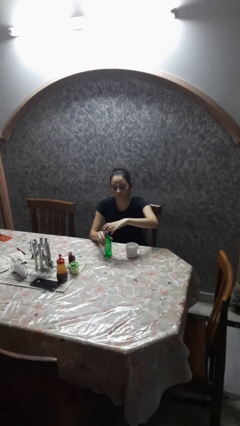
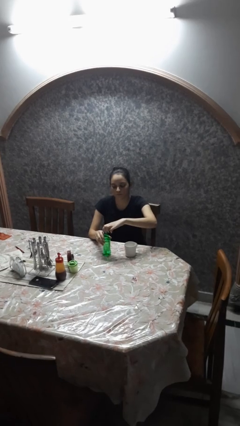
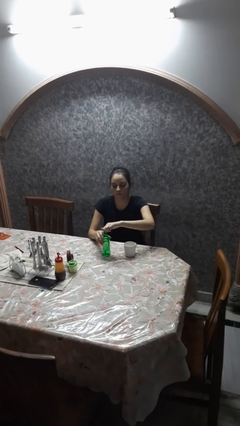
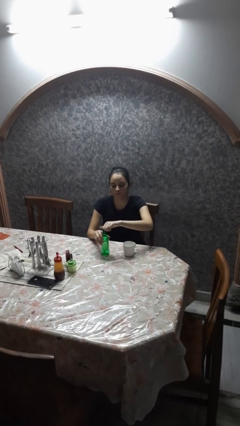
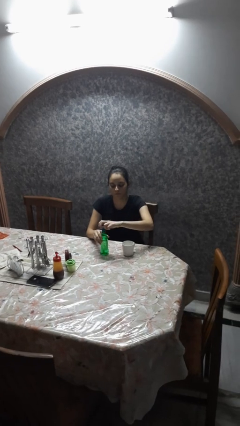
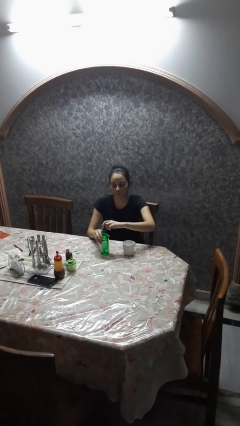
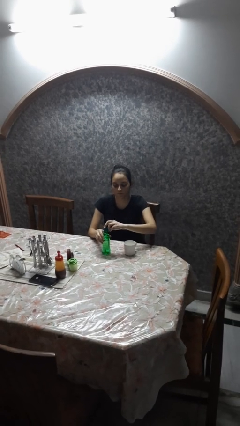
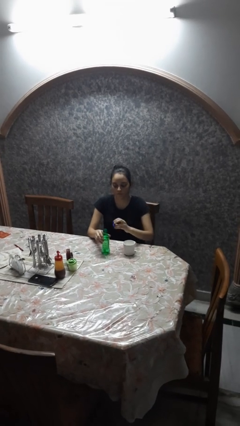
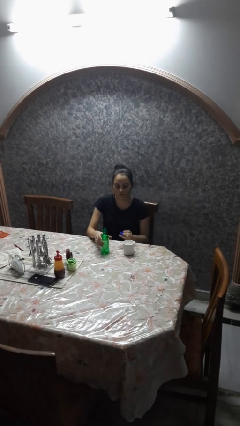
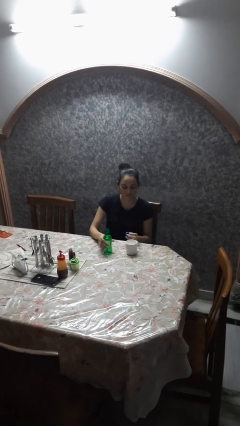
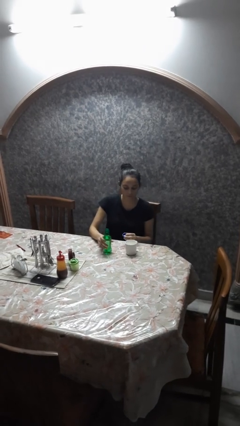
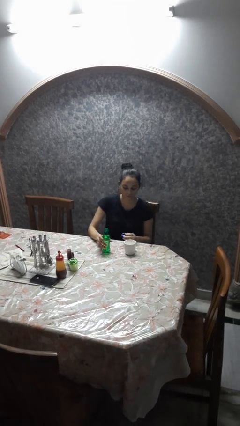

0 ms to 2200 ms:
person unscrews lid from bottle

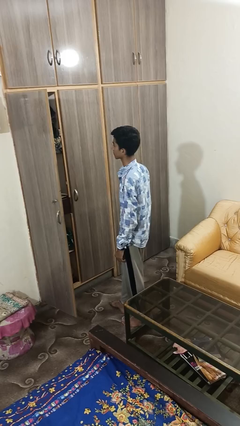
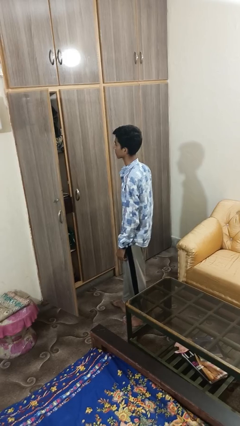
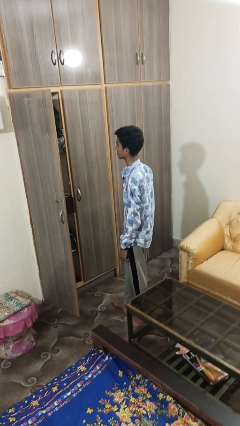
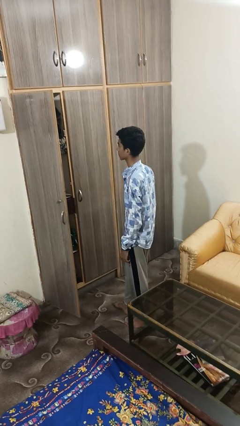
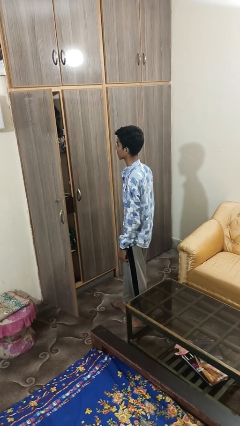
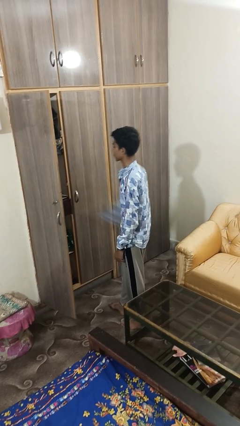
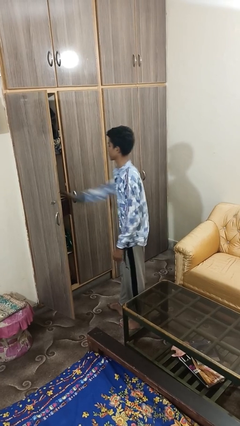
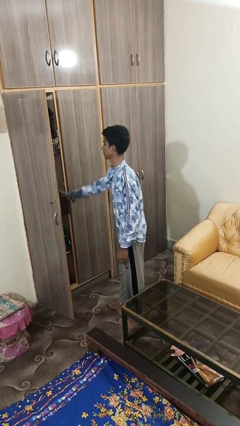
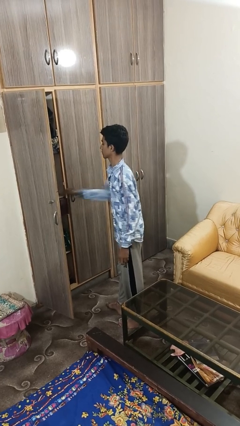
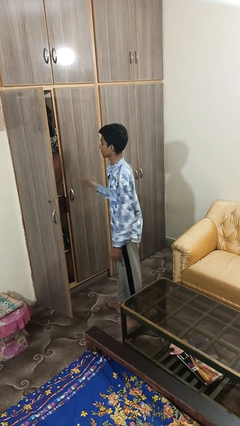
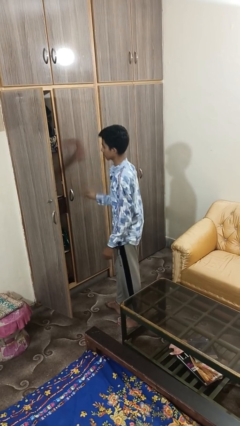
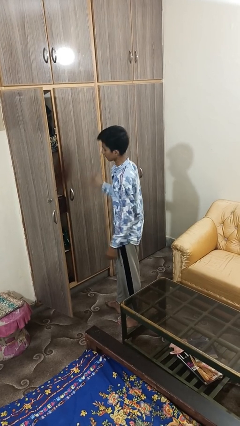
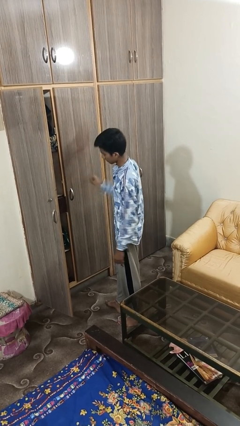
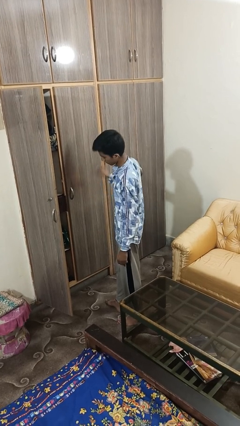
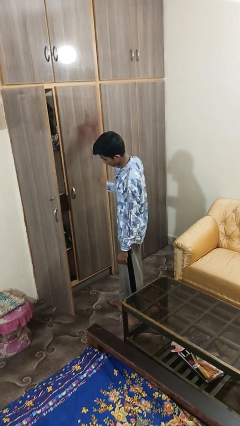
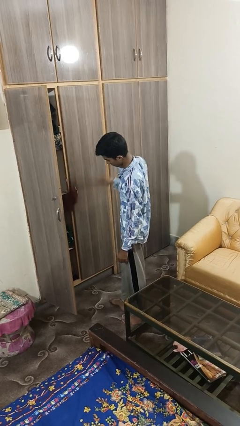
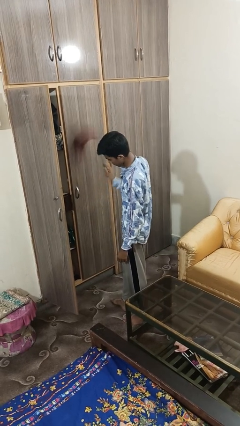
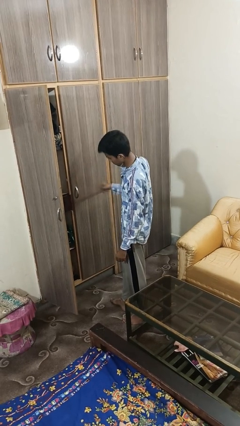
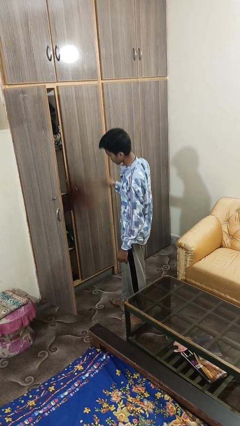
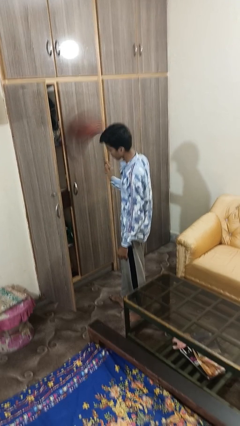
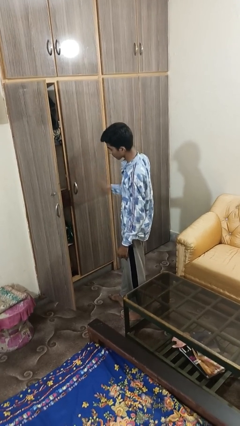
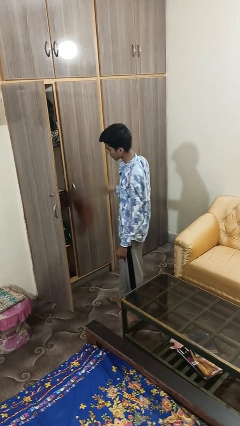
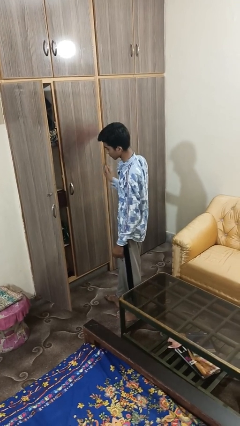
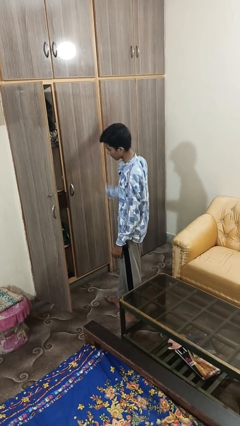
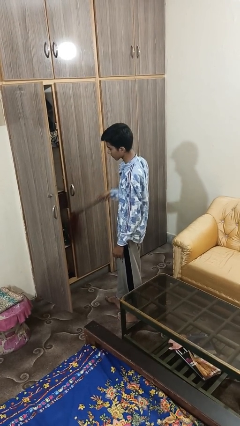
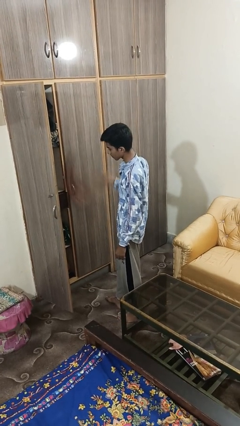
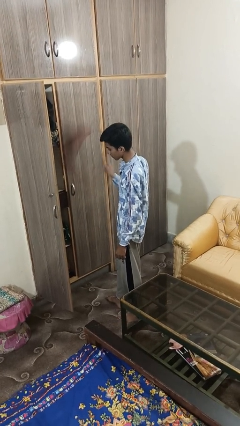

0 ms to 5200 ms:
person dusts furniture

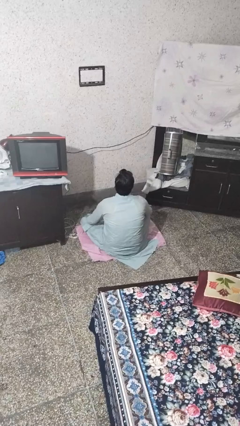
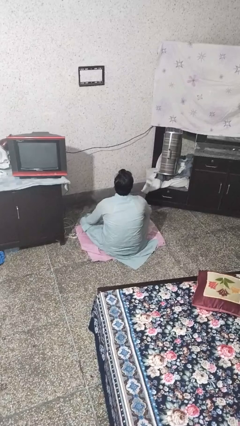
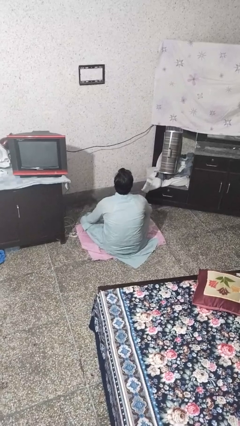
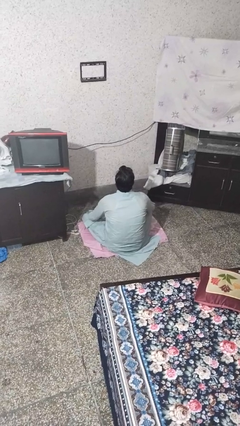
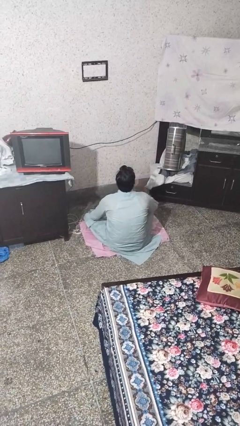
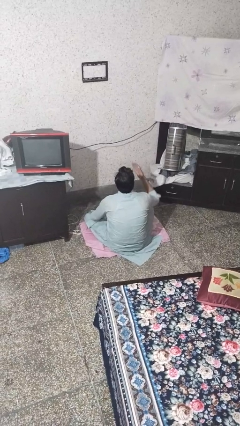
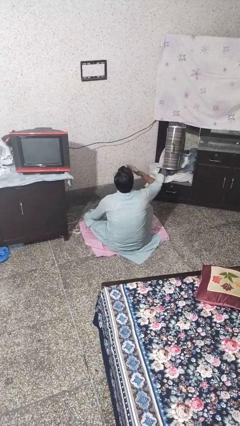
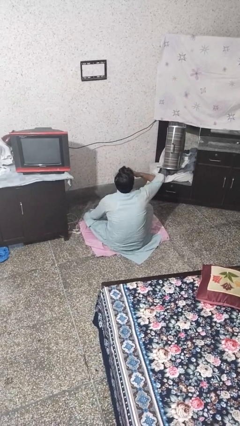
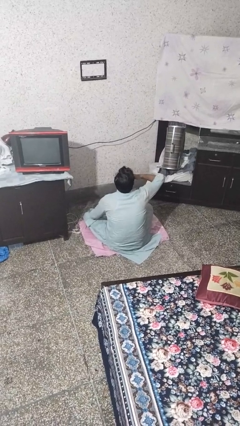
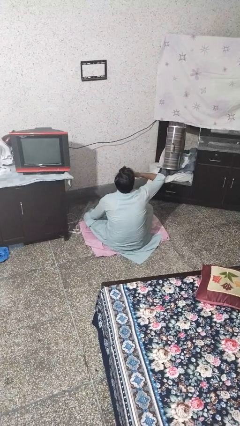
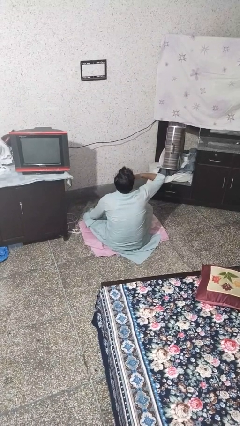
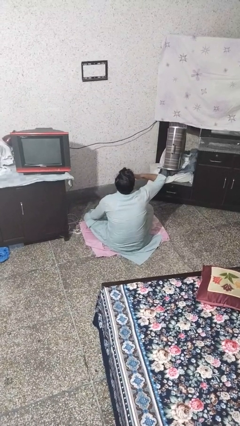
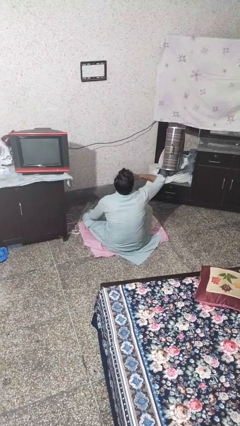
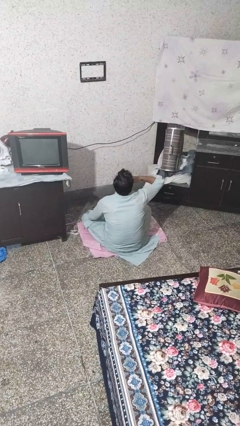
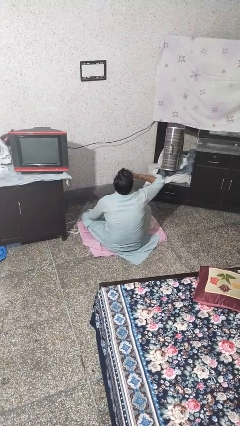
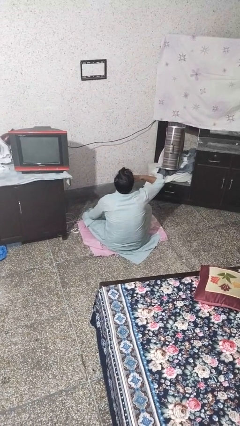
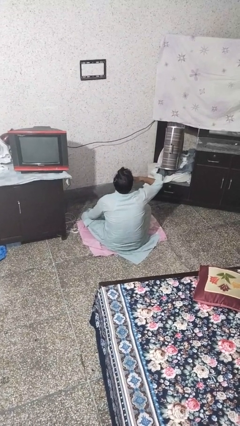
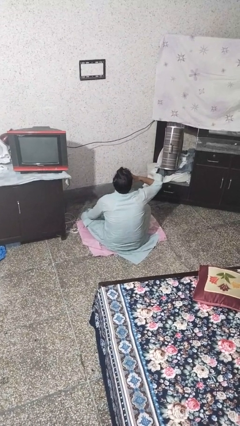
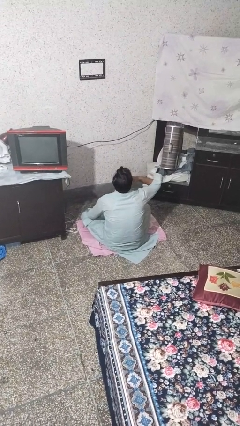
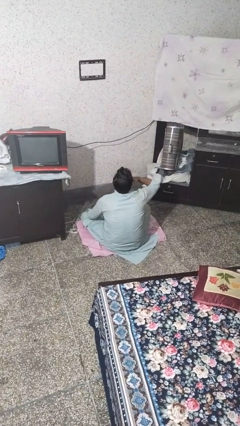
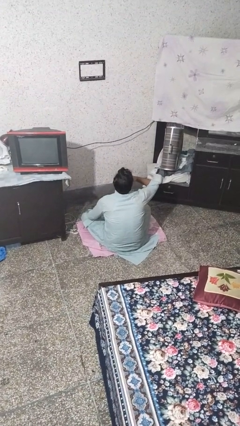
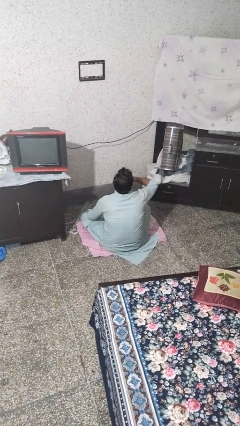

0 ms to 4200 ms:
person yawns

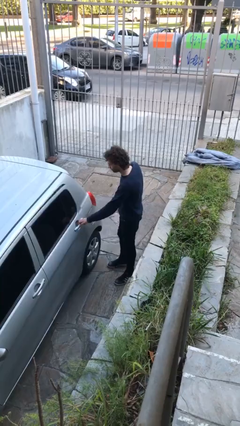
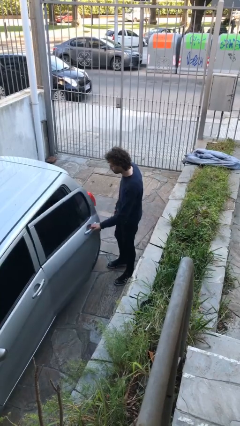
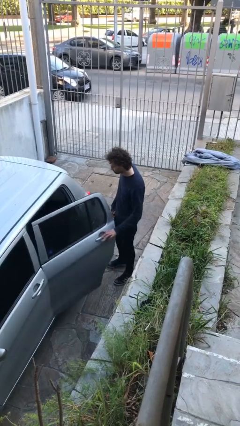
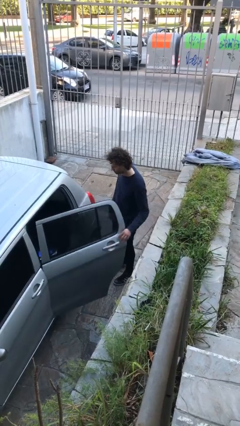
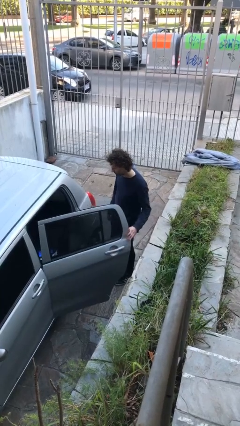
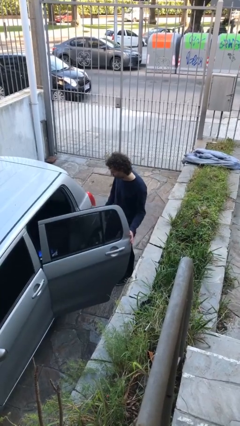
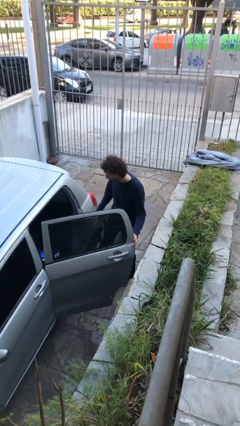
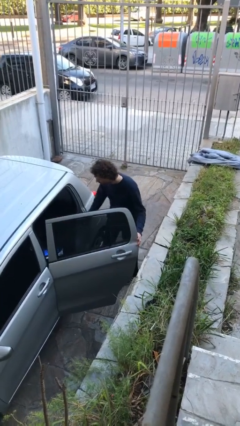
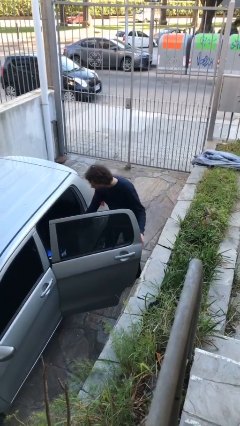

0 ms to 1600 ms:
person opens car door

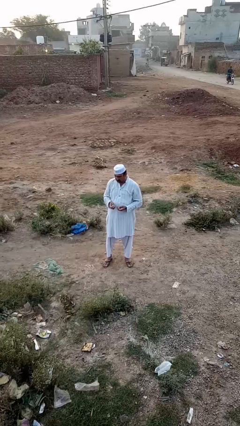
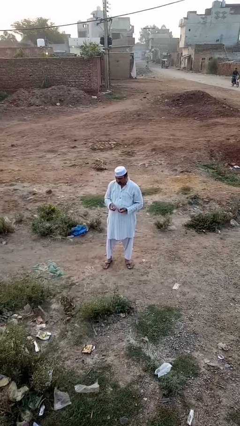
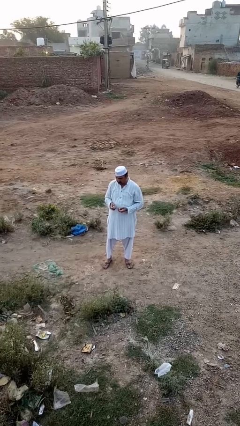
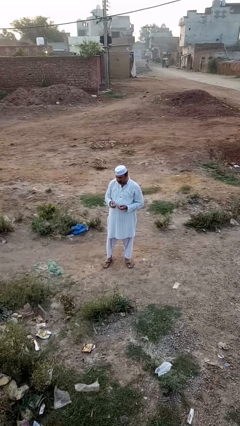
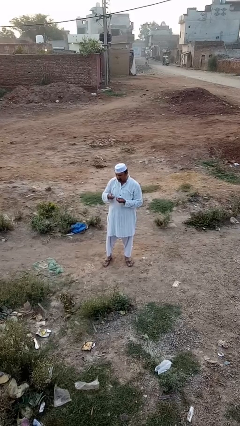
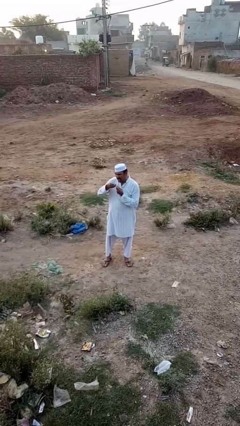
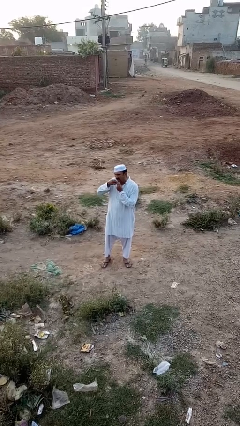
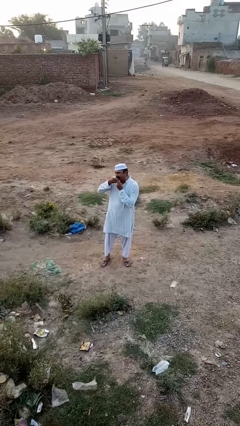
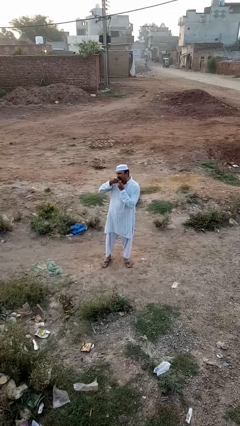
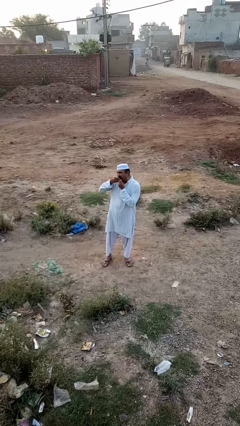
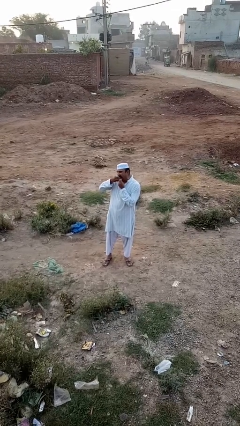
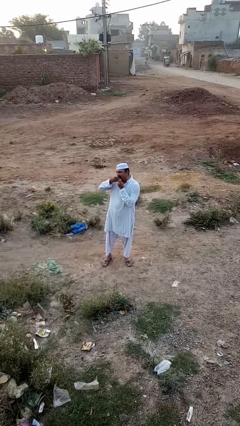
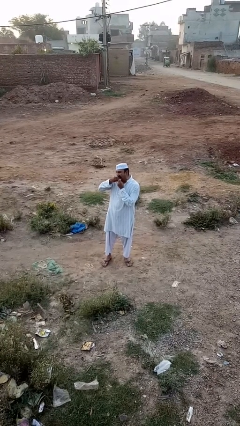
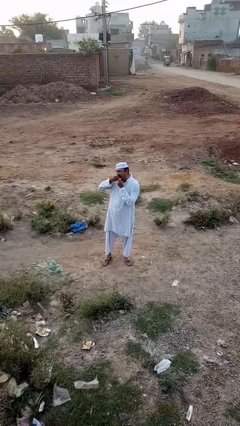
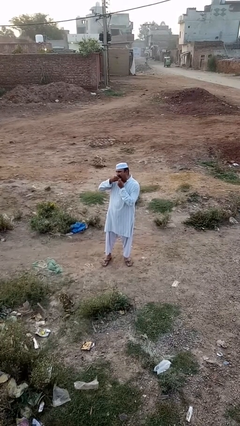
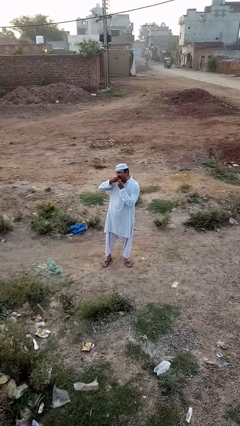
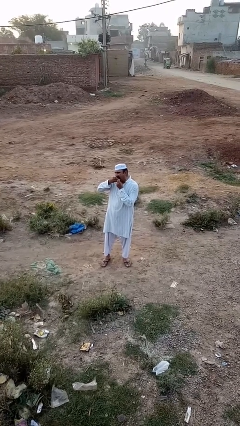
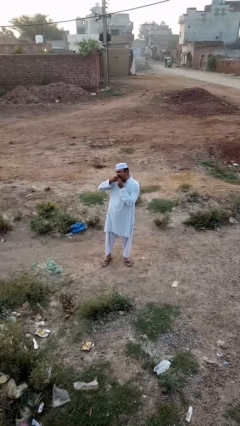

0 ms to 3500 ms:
person flosses

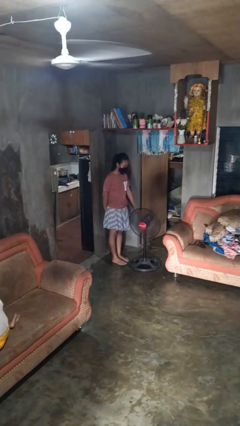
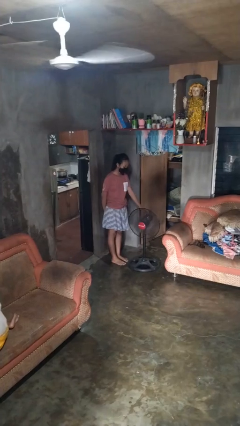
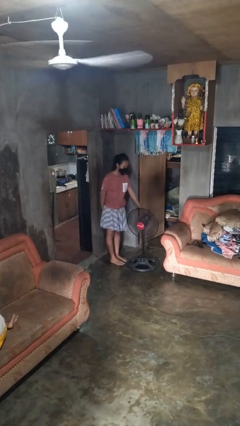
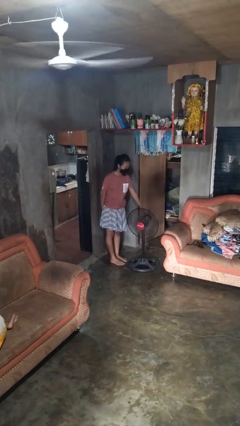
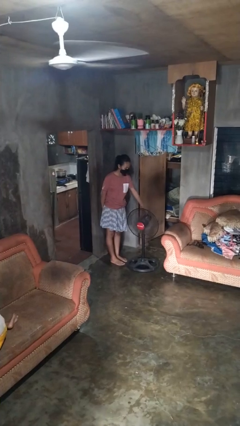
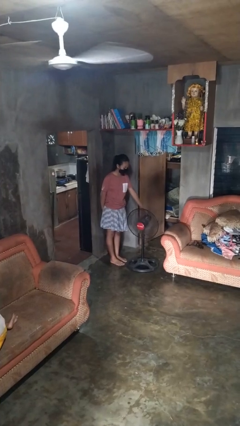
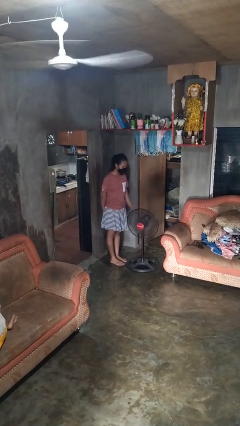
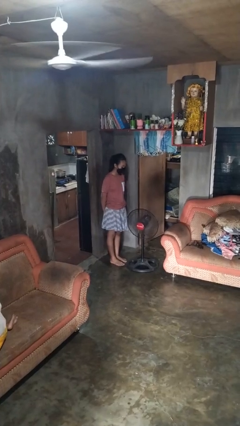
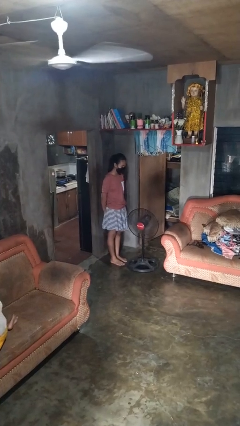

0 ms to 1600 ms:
person turns on fan
